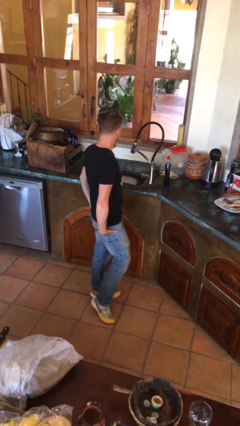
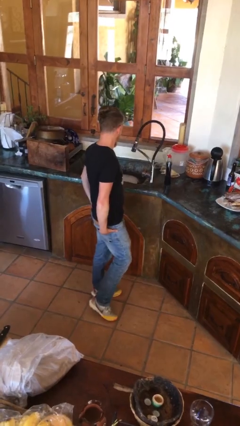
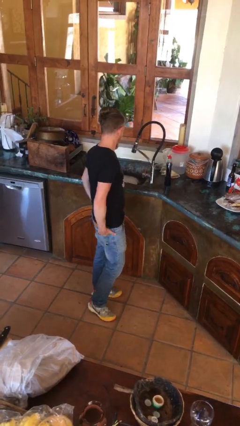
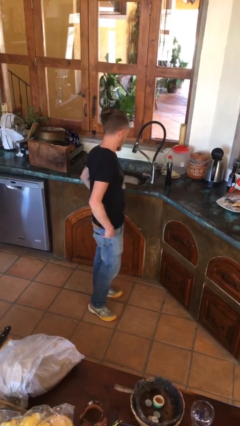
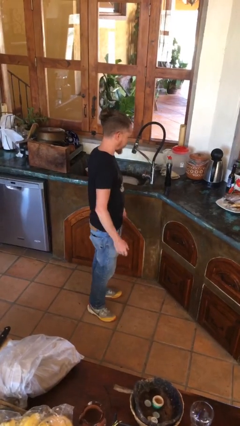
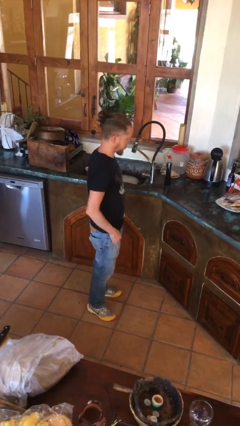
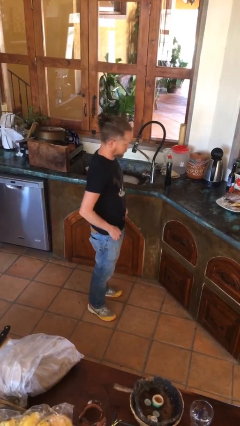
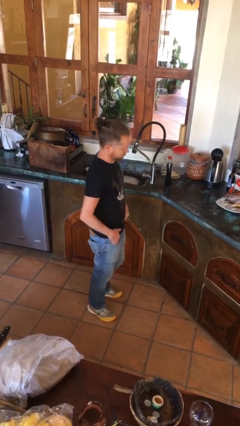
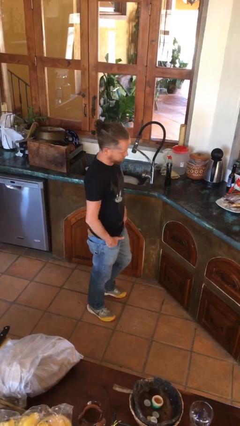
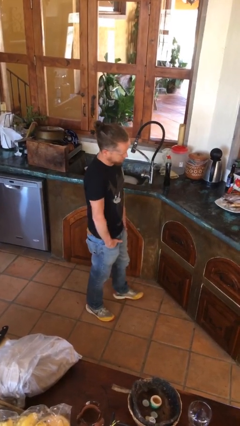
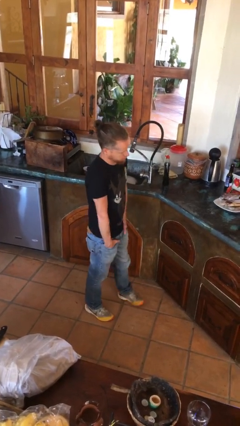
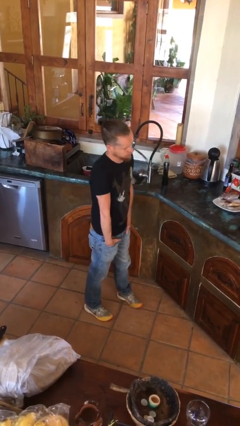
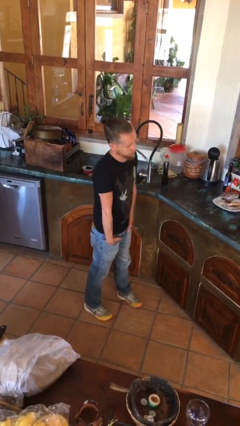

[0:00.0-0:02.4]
person puts hands in back pockets

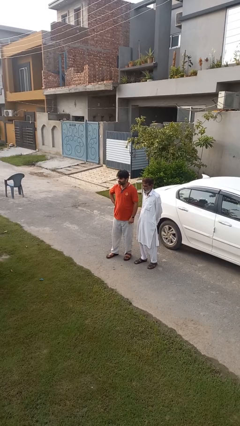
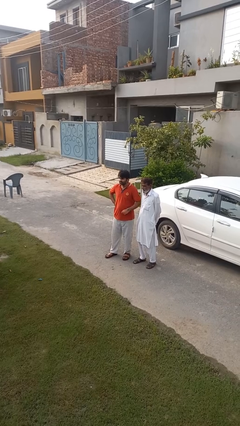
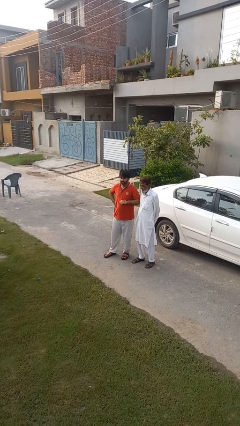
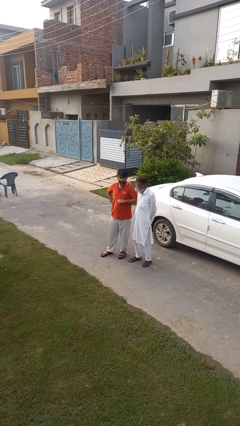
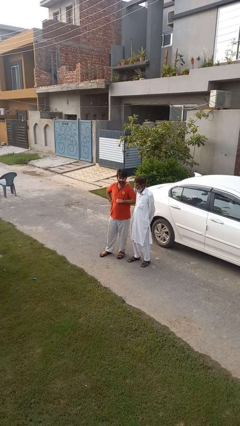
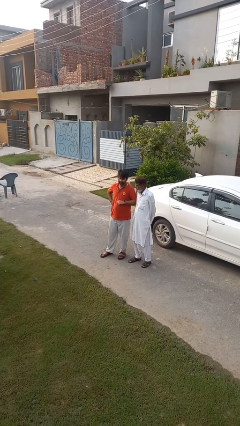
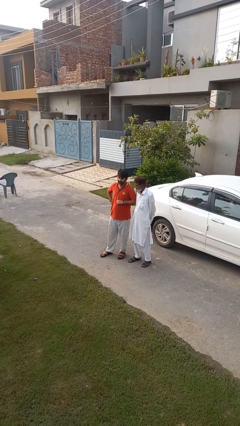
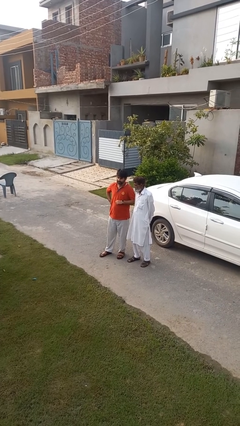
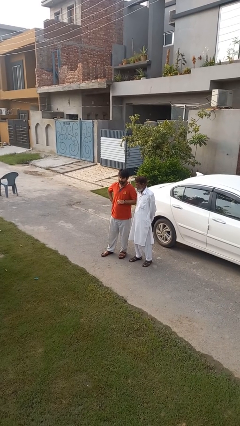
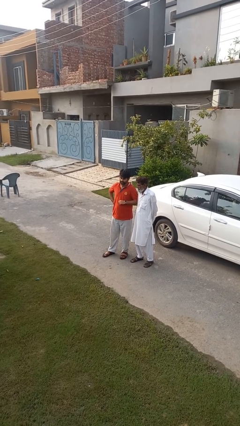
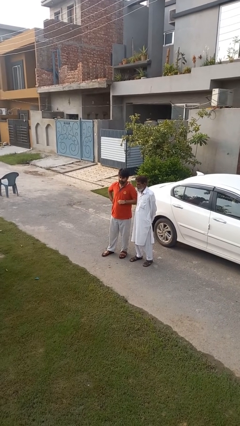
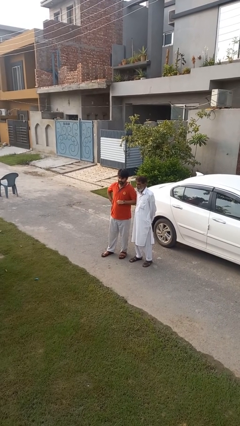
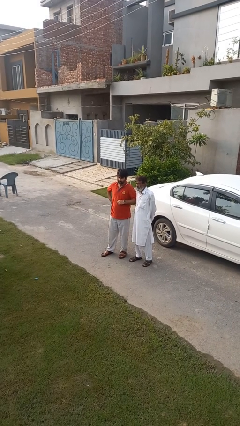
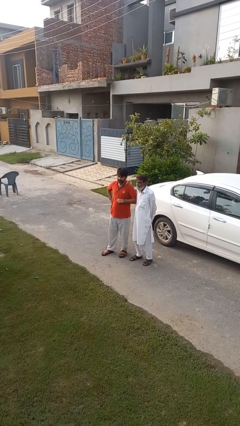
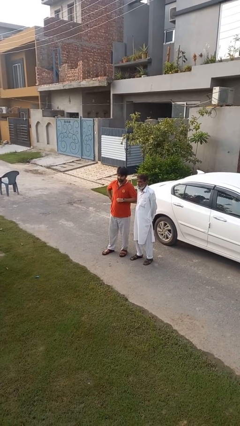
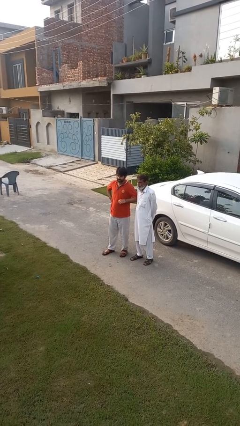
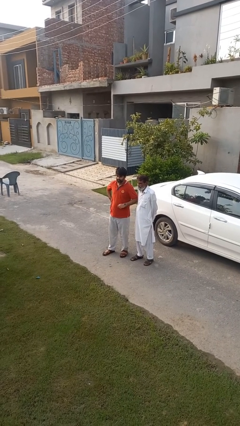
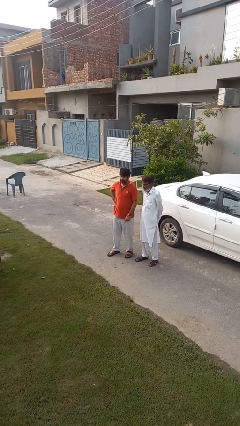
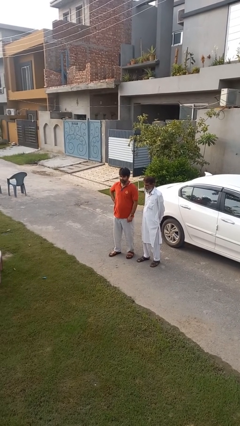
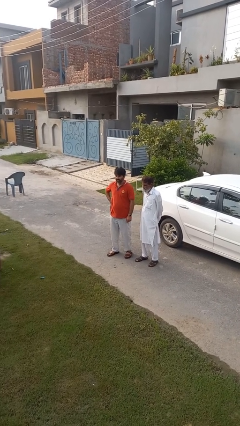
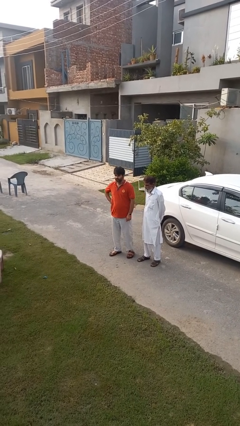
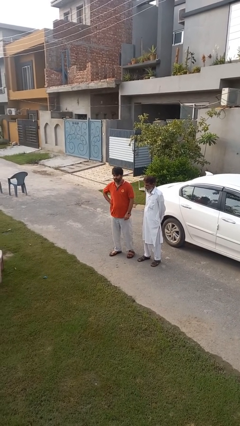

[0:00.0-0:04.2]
person nudges person with elbow

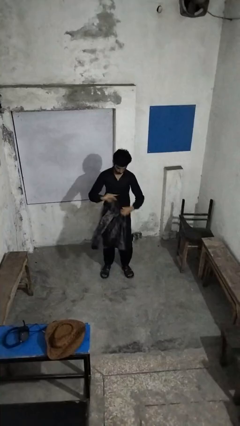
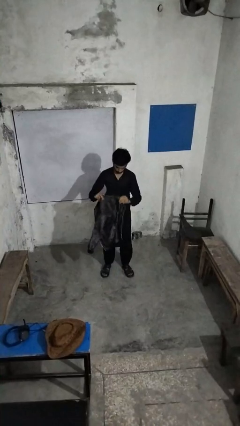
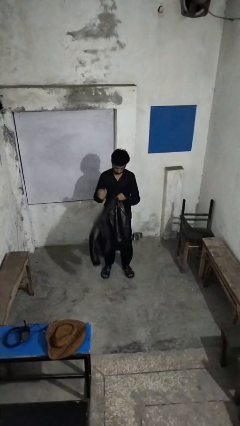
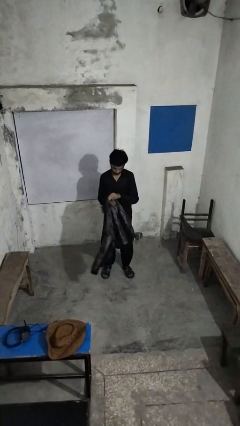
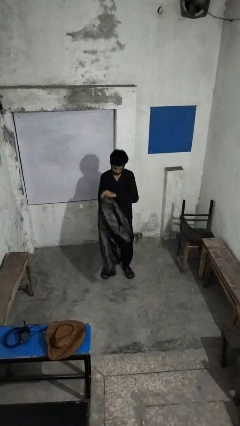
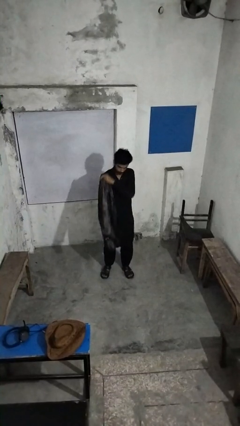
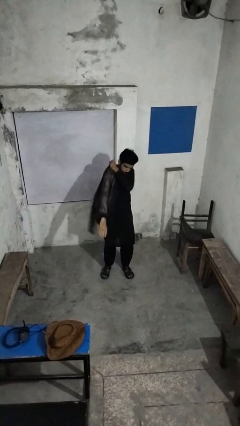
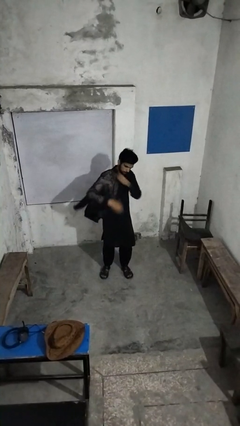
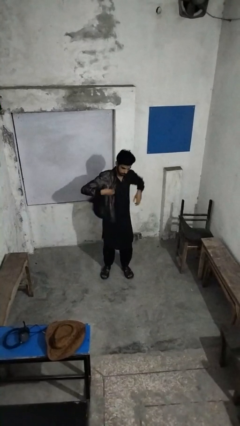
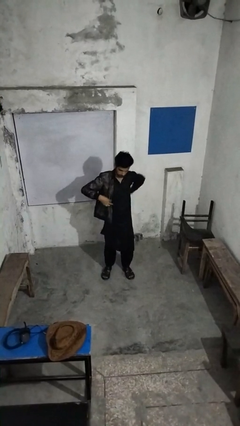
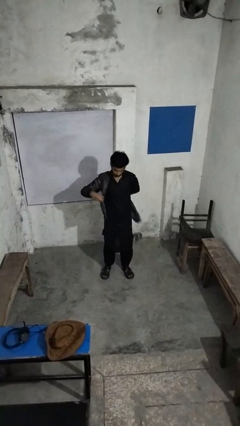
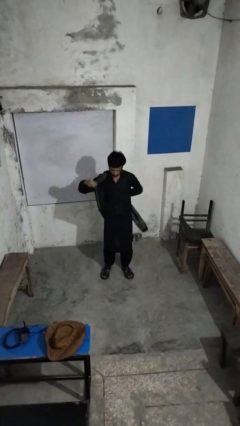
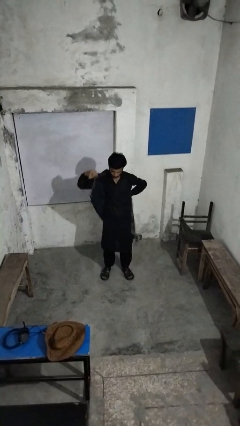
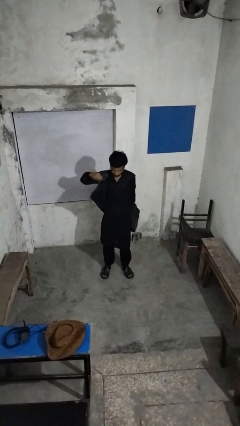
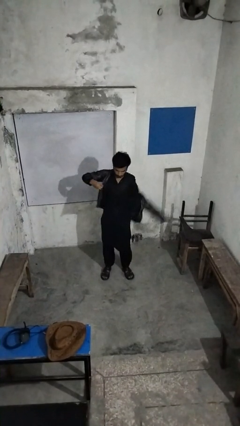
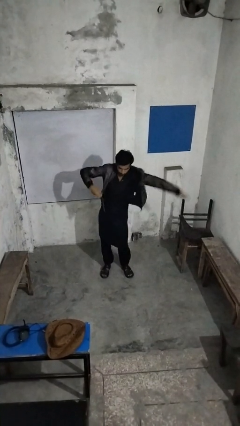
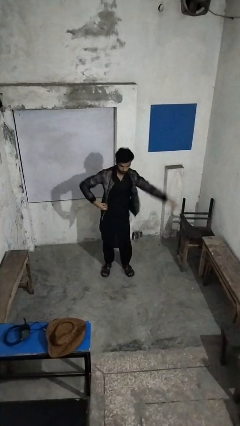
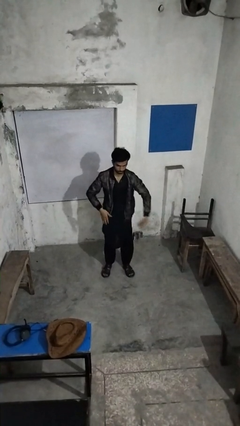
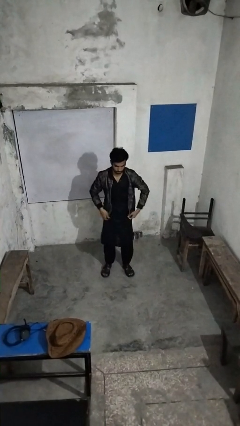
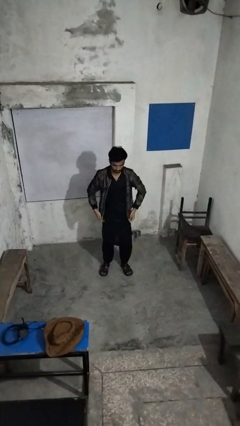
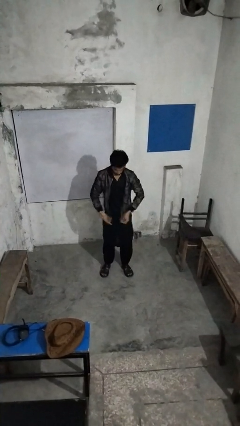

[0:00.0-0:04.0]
person puts on jacket

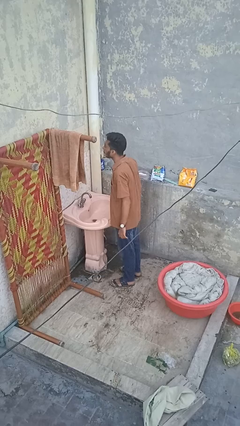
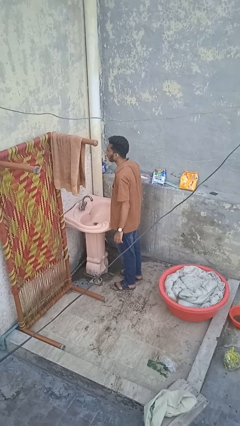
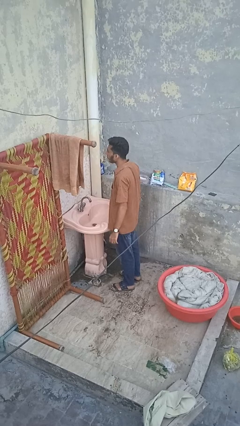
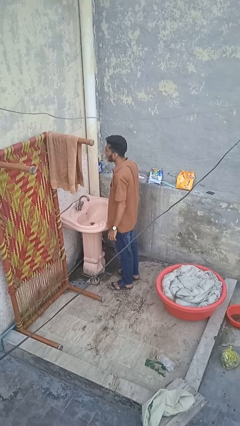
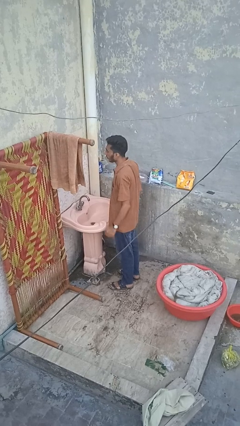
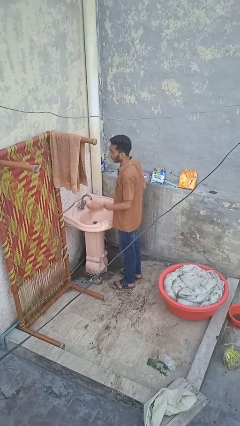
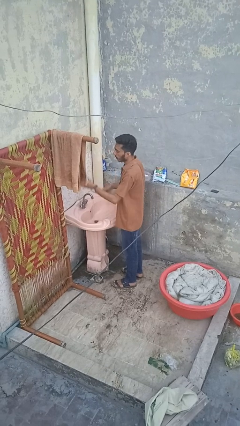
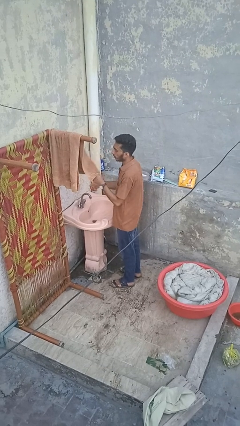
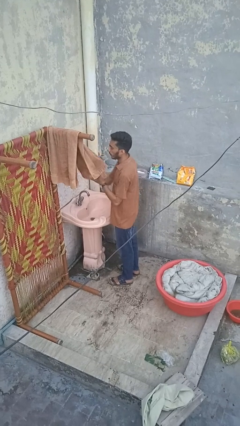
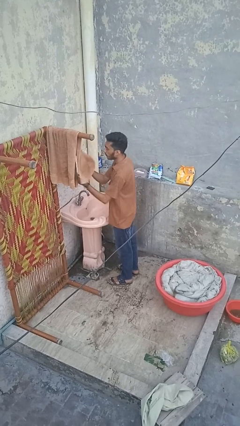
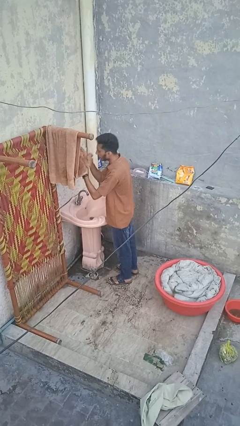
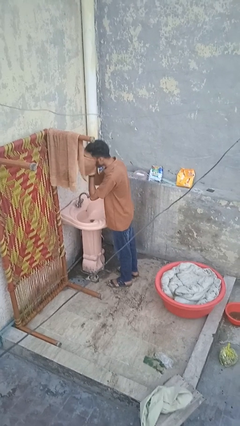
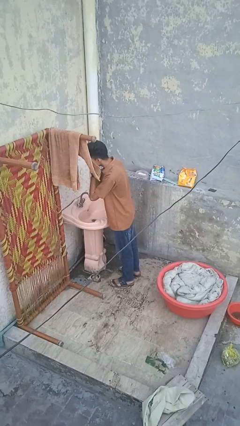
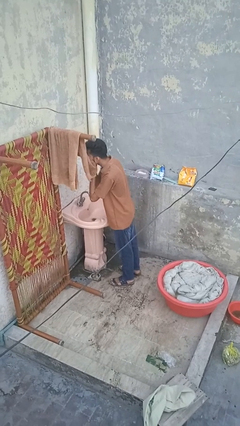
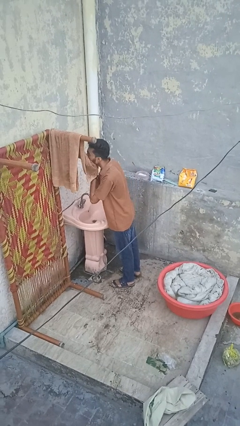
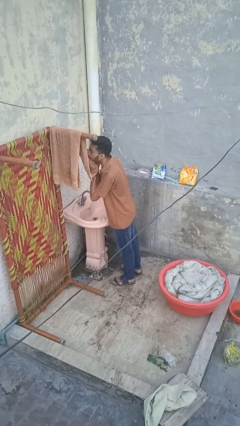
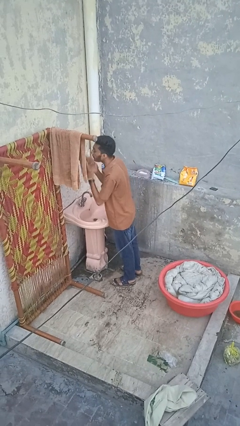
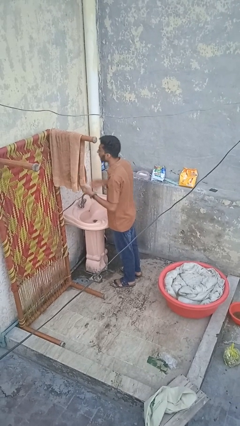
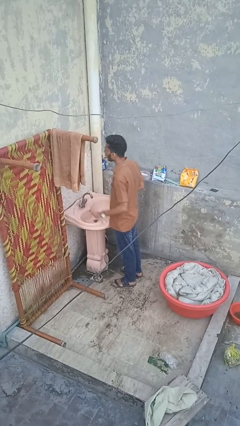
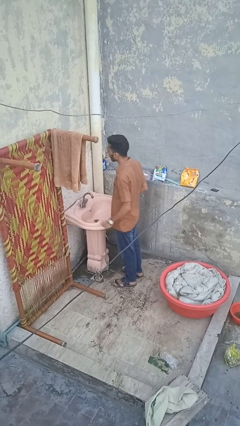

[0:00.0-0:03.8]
person dries face with towel

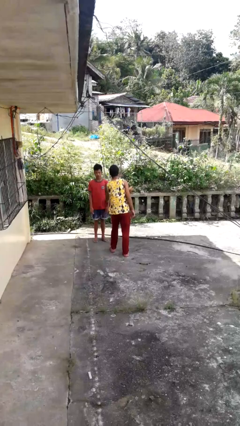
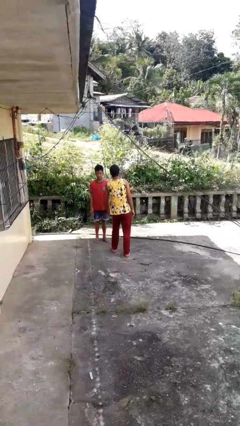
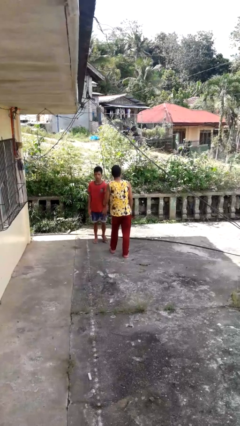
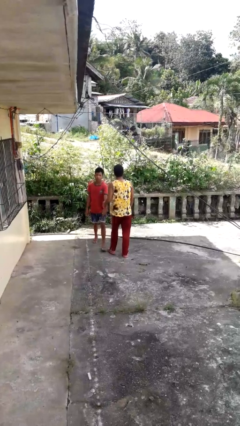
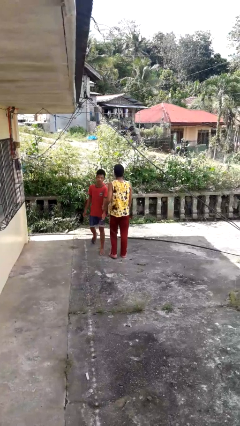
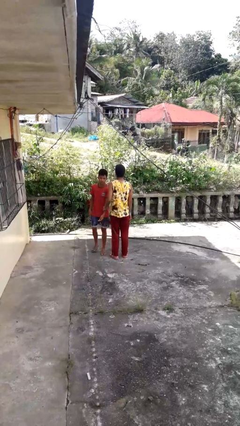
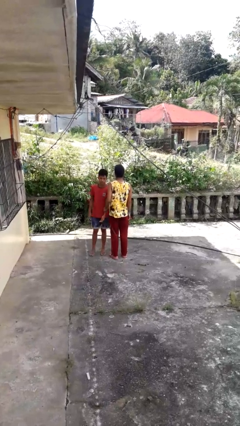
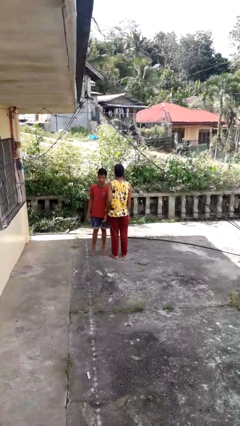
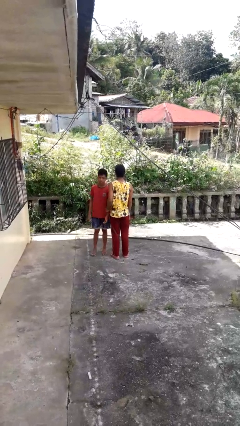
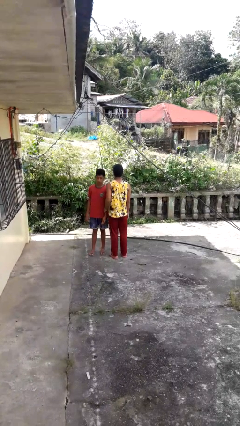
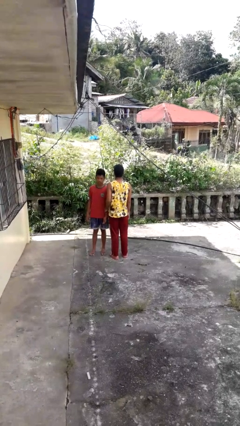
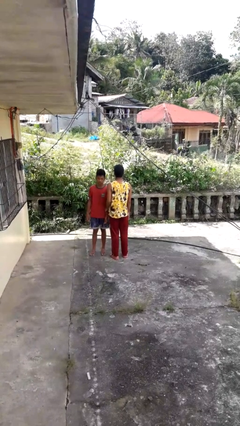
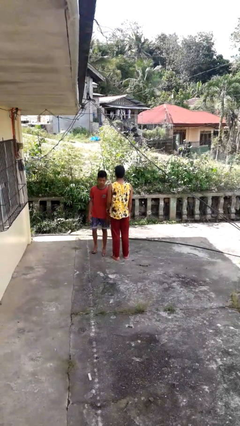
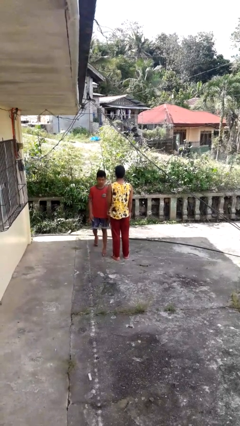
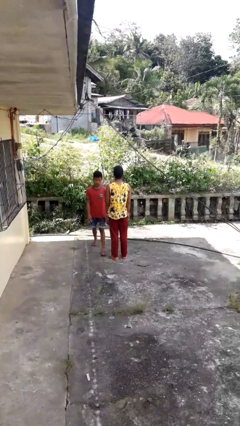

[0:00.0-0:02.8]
person grabs person by forearm

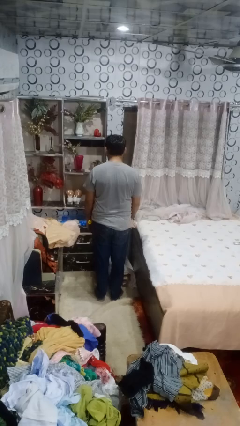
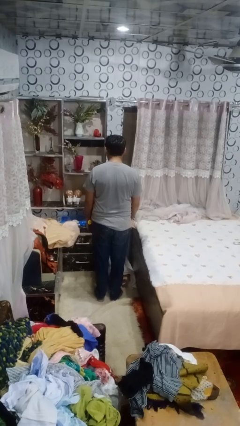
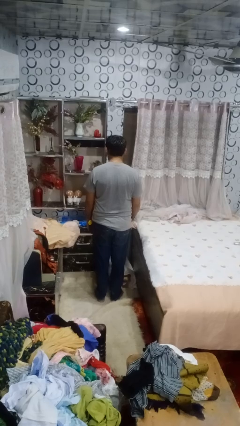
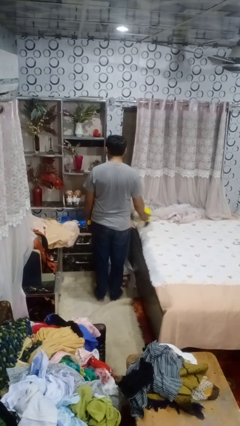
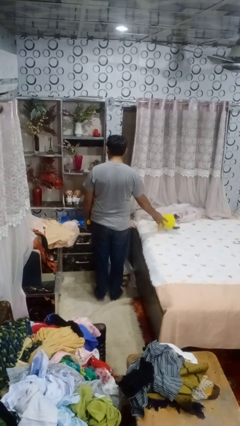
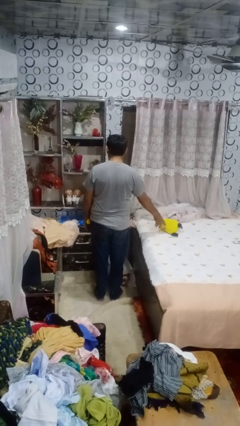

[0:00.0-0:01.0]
person throws object on bed
